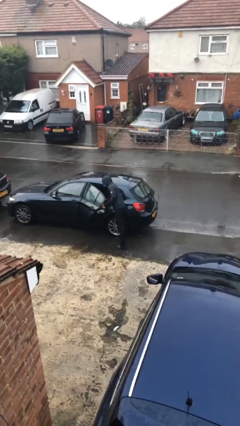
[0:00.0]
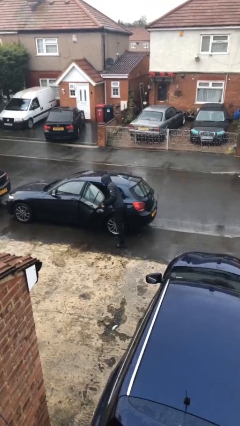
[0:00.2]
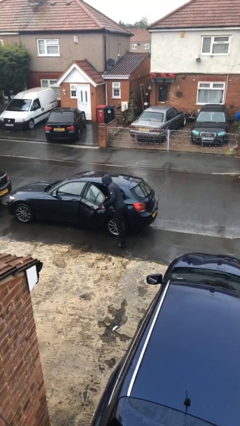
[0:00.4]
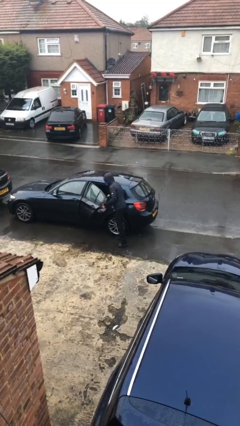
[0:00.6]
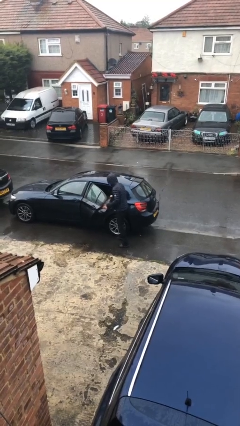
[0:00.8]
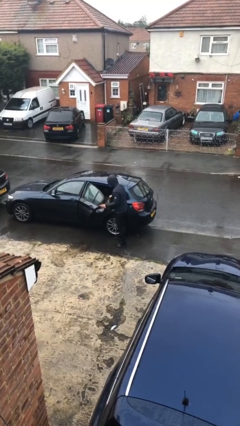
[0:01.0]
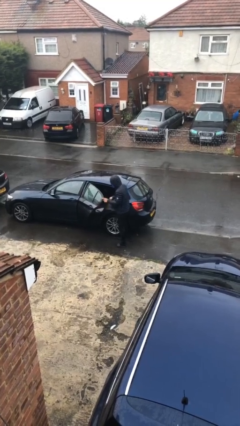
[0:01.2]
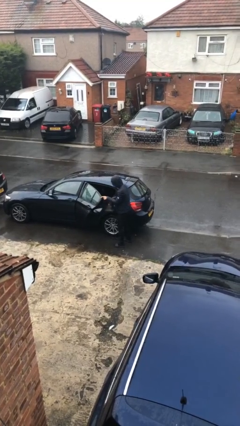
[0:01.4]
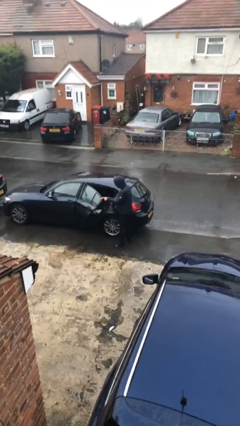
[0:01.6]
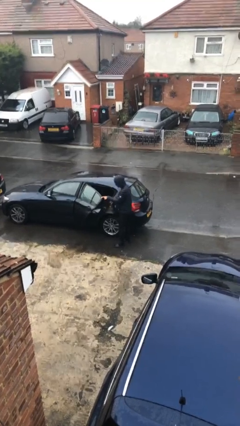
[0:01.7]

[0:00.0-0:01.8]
person unloads car

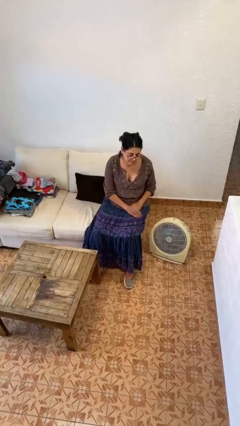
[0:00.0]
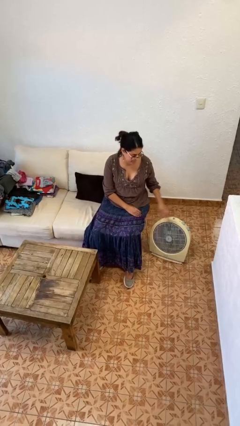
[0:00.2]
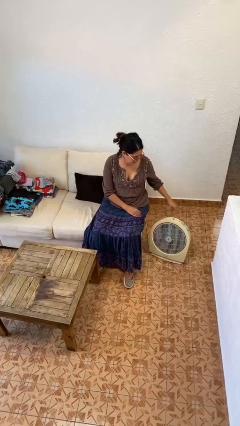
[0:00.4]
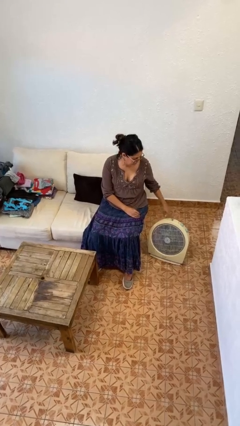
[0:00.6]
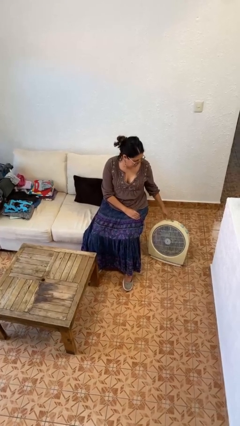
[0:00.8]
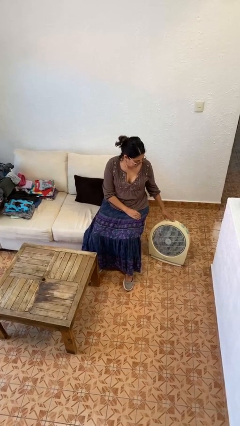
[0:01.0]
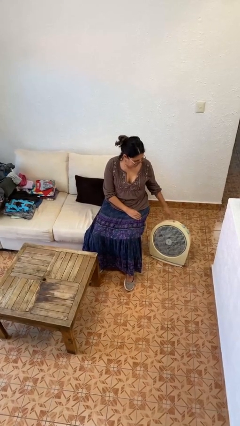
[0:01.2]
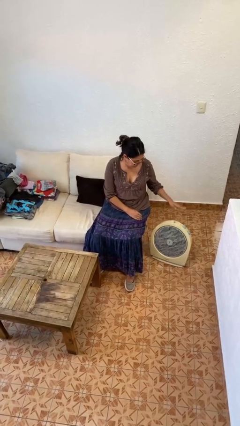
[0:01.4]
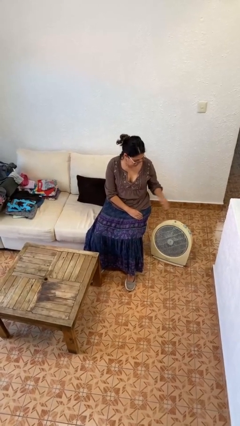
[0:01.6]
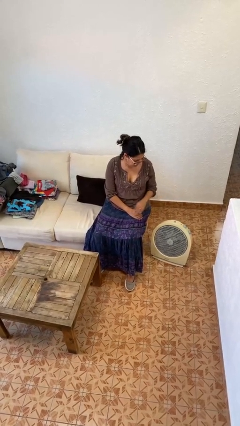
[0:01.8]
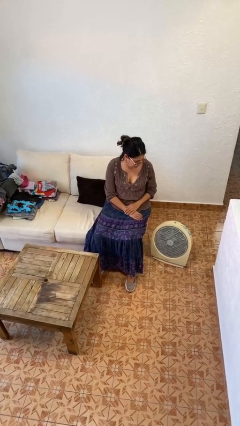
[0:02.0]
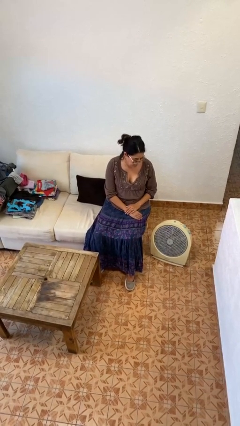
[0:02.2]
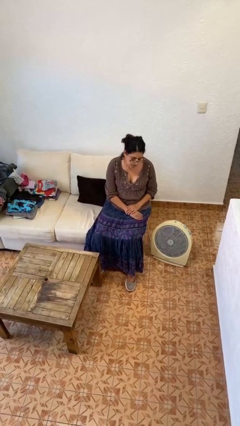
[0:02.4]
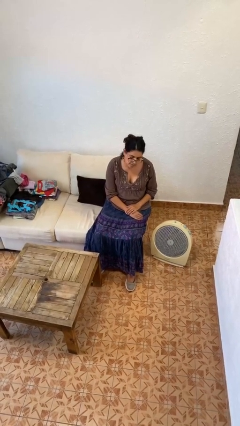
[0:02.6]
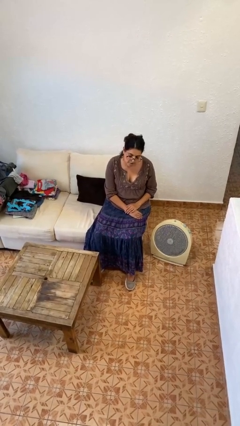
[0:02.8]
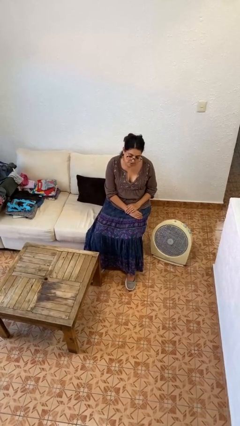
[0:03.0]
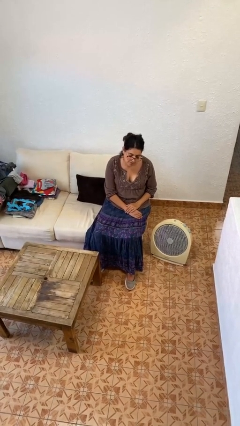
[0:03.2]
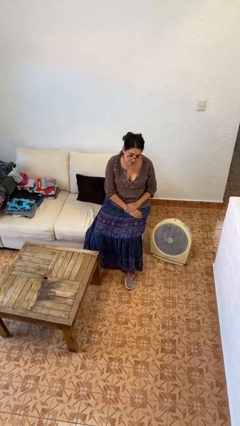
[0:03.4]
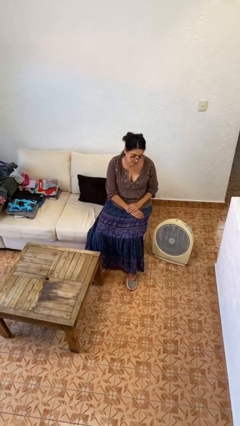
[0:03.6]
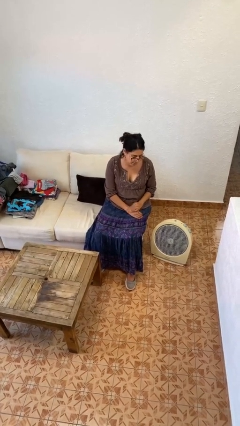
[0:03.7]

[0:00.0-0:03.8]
person turns on fan

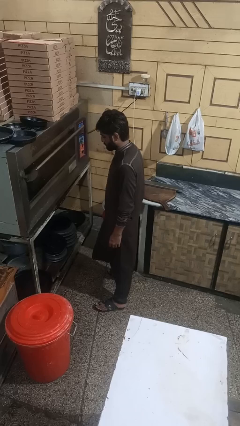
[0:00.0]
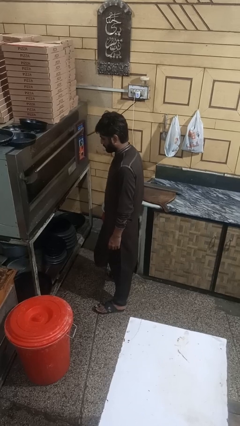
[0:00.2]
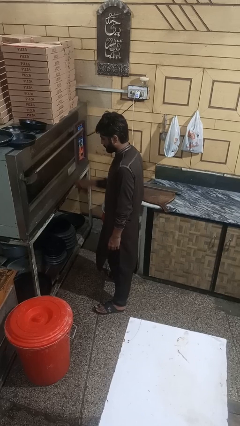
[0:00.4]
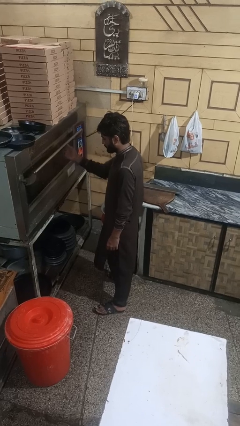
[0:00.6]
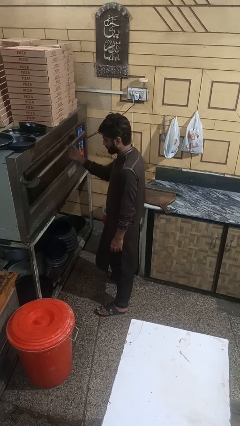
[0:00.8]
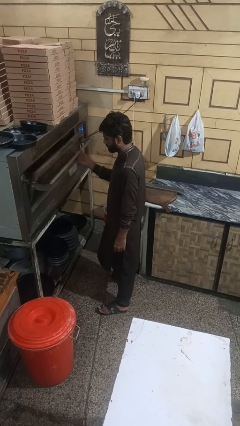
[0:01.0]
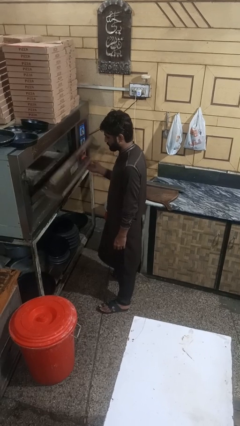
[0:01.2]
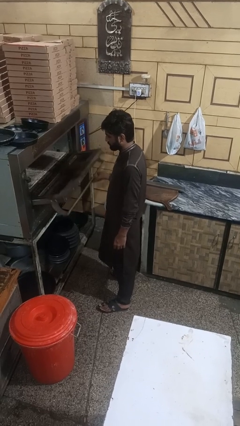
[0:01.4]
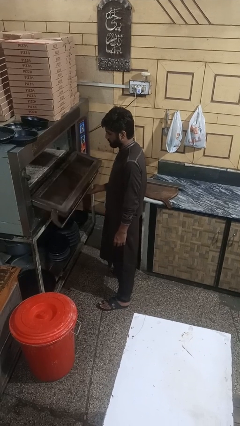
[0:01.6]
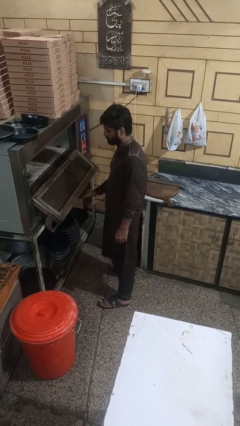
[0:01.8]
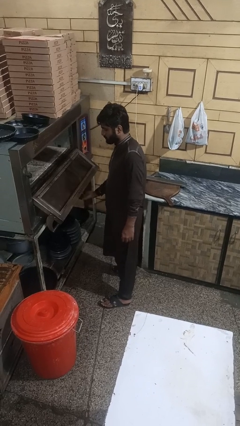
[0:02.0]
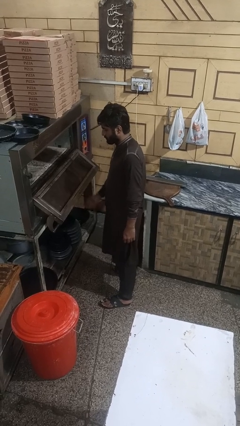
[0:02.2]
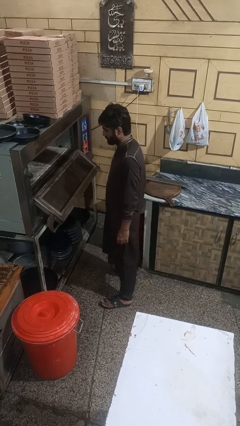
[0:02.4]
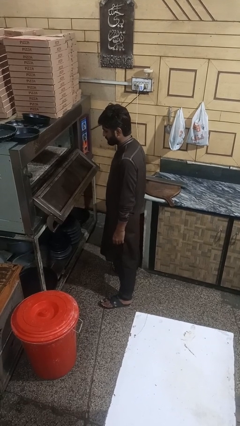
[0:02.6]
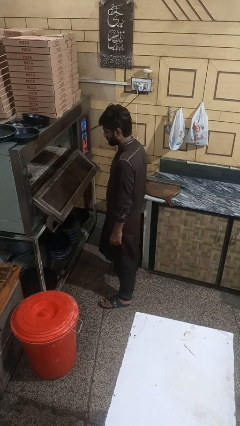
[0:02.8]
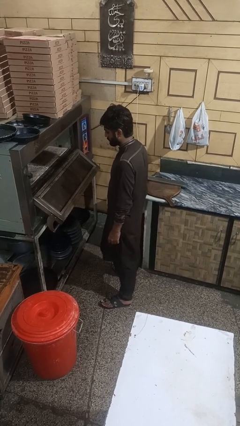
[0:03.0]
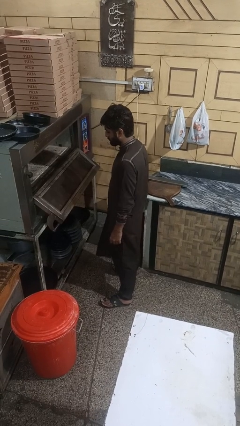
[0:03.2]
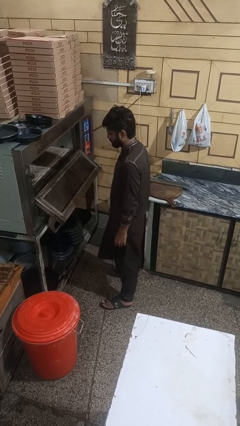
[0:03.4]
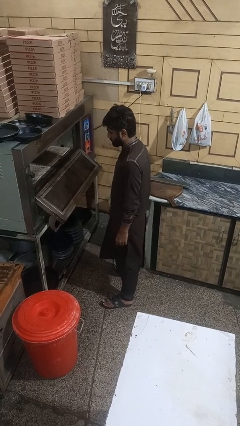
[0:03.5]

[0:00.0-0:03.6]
person opens microwave

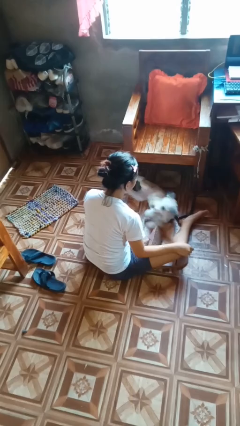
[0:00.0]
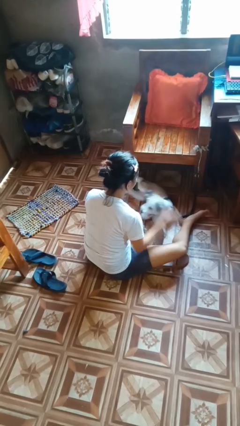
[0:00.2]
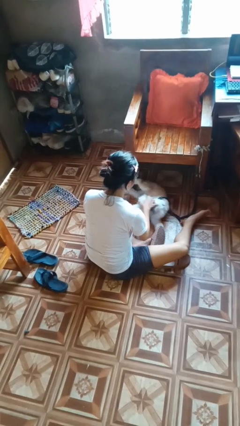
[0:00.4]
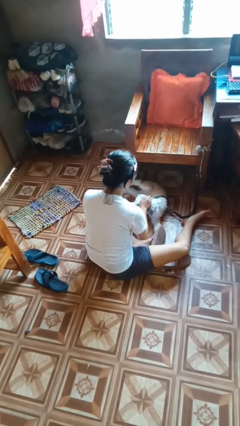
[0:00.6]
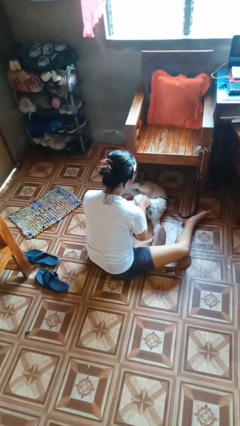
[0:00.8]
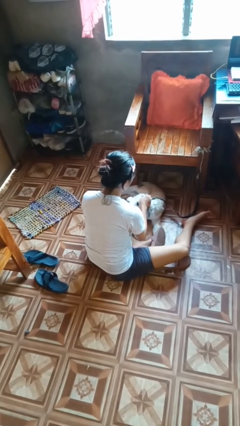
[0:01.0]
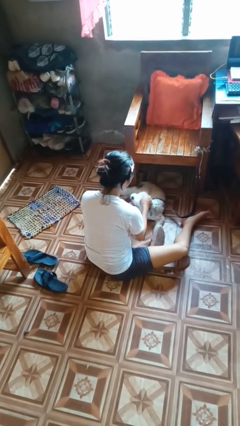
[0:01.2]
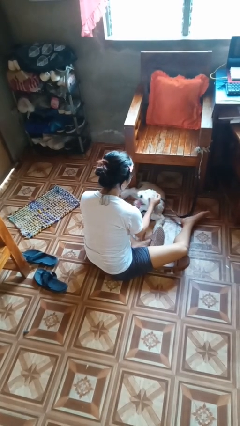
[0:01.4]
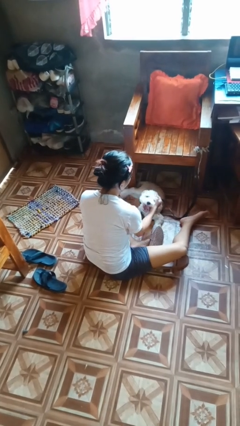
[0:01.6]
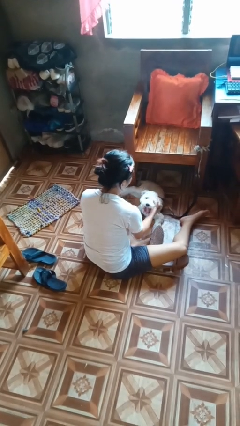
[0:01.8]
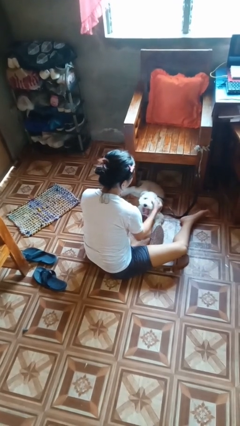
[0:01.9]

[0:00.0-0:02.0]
person pets dog

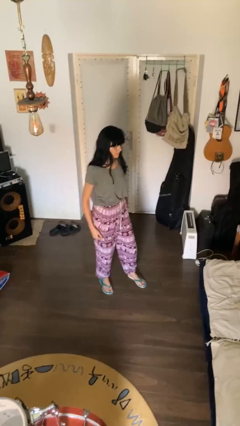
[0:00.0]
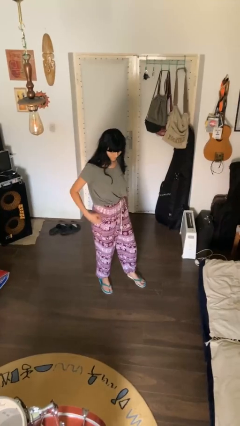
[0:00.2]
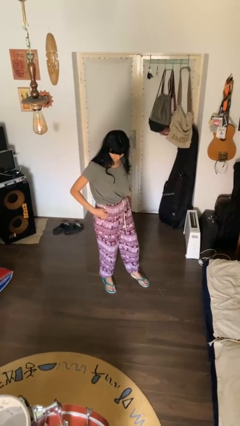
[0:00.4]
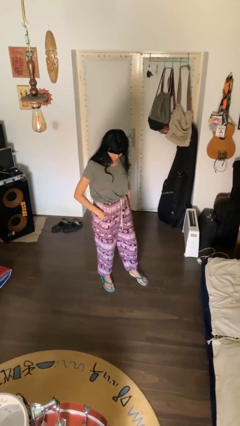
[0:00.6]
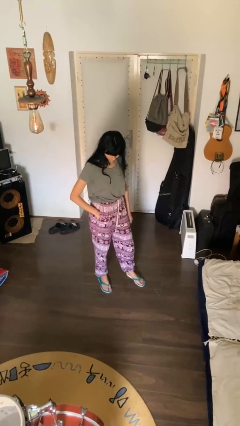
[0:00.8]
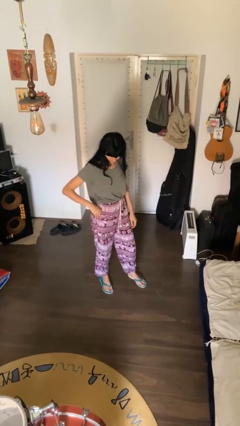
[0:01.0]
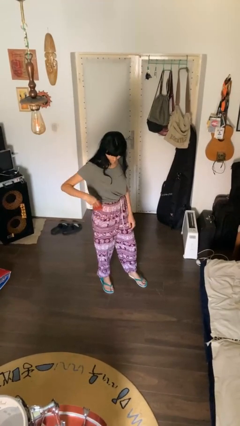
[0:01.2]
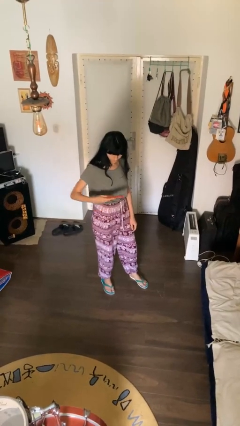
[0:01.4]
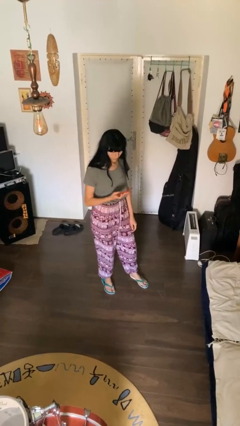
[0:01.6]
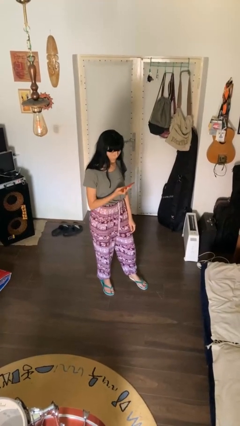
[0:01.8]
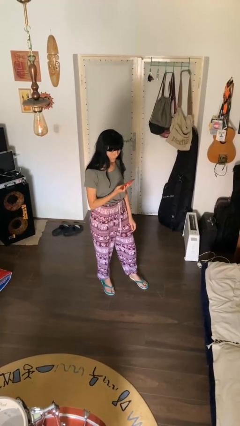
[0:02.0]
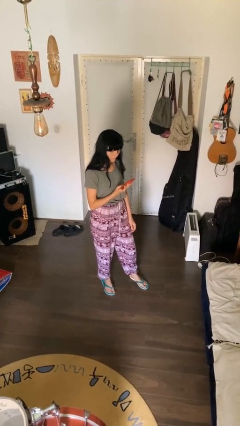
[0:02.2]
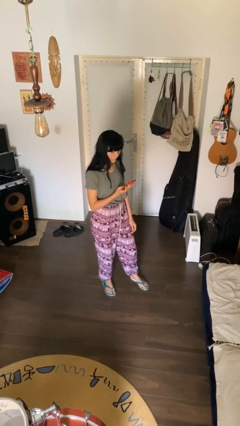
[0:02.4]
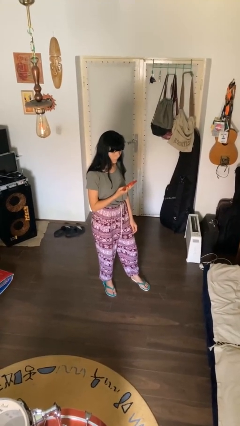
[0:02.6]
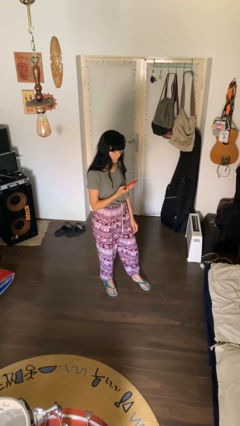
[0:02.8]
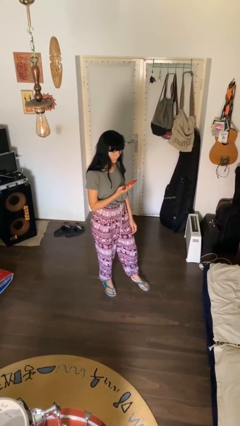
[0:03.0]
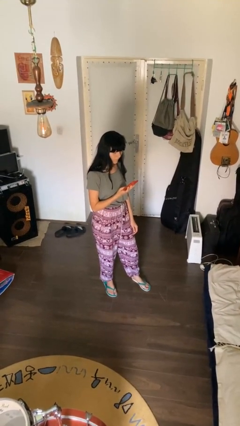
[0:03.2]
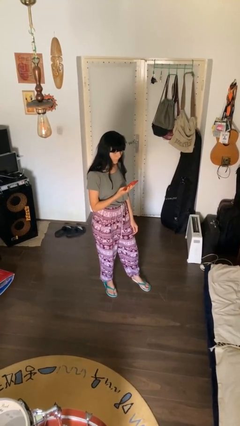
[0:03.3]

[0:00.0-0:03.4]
person takes phone from pocket

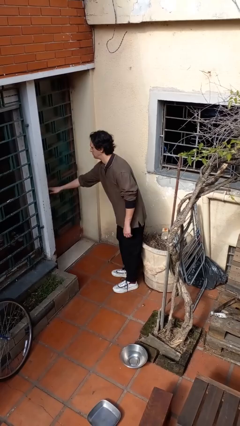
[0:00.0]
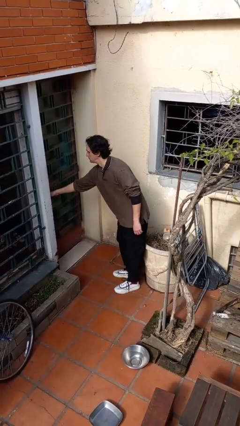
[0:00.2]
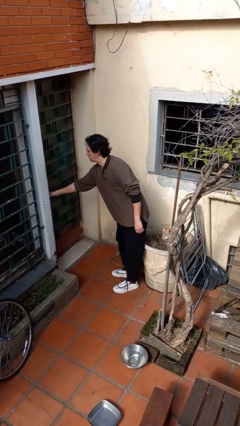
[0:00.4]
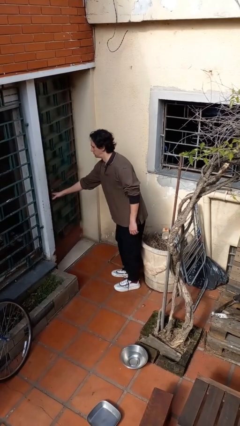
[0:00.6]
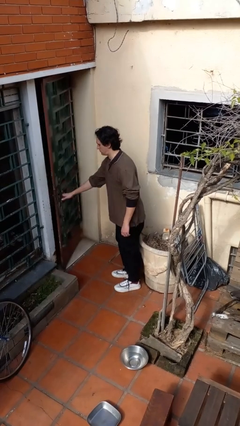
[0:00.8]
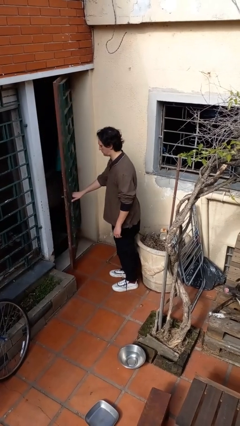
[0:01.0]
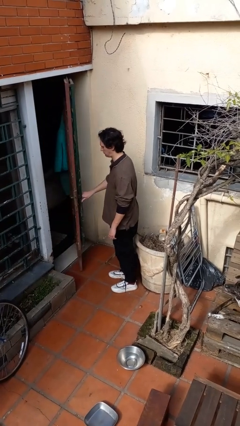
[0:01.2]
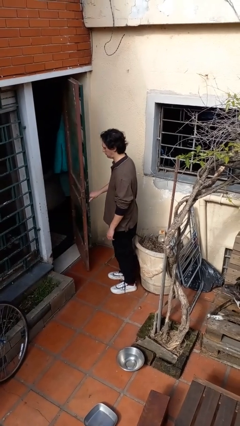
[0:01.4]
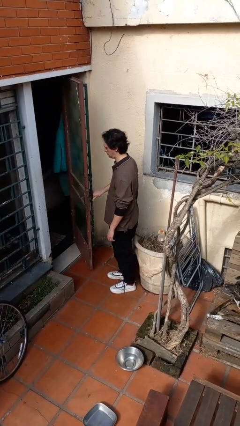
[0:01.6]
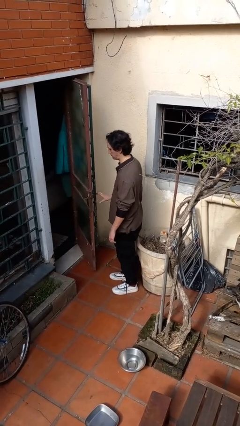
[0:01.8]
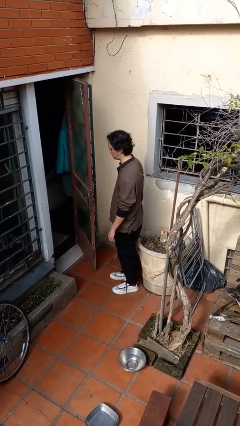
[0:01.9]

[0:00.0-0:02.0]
person opens facility door

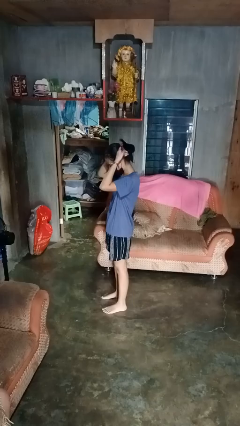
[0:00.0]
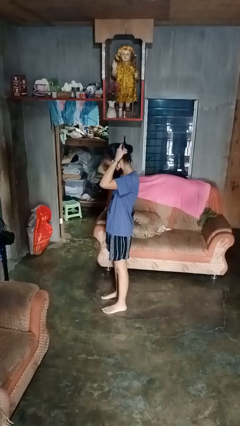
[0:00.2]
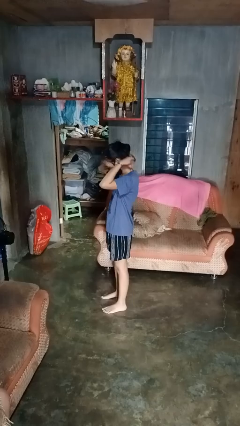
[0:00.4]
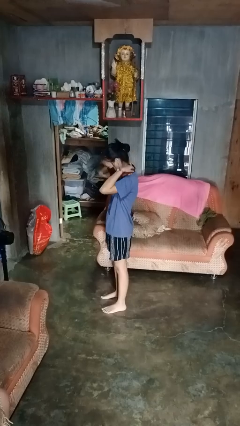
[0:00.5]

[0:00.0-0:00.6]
person puts on necklace
